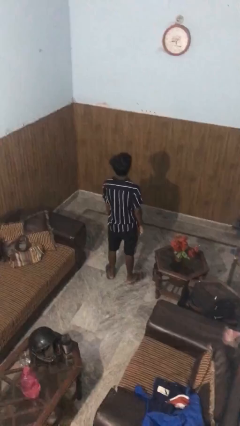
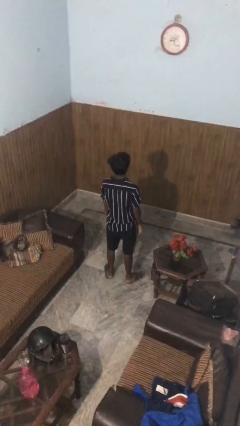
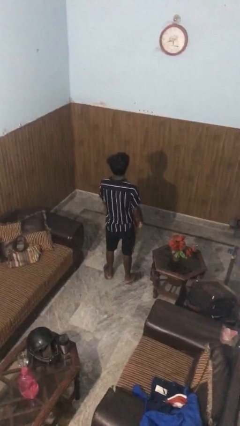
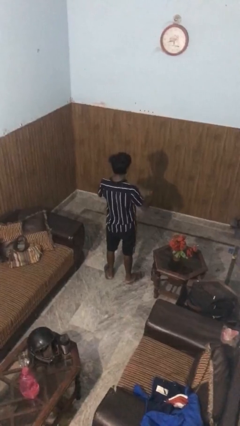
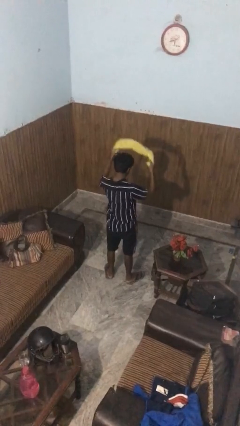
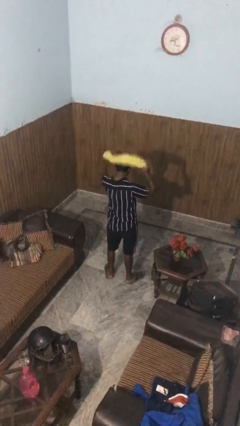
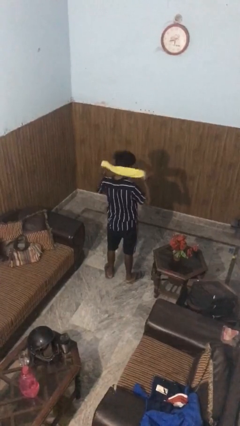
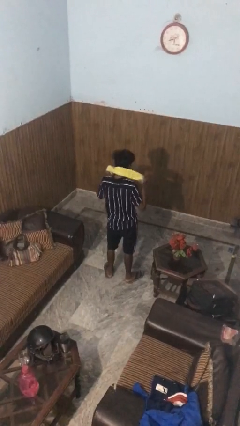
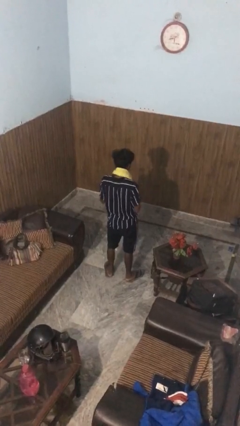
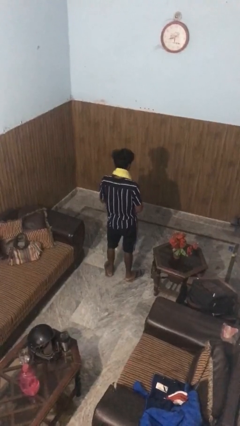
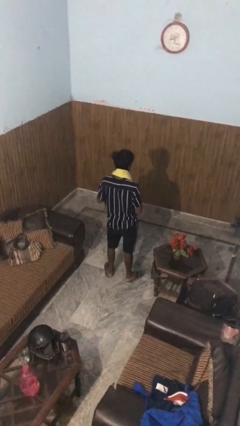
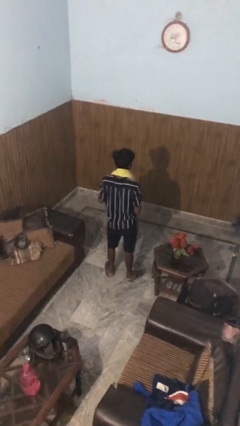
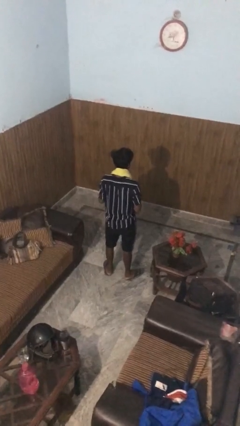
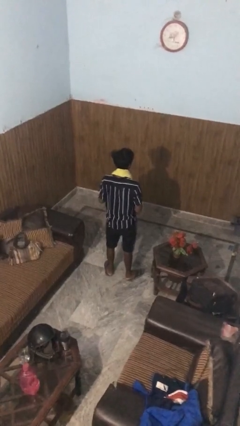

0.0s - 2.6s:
person puts on scarf

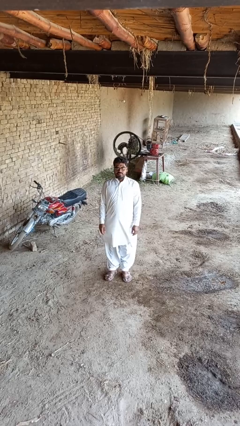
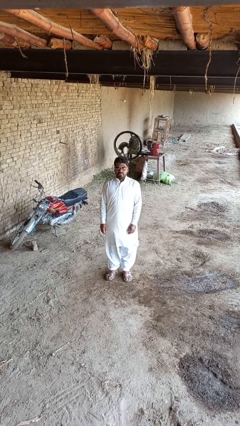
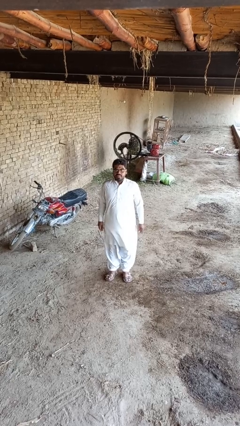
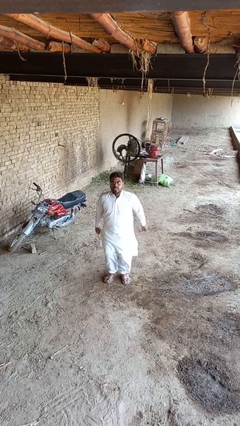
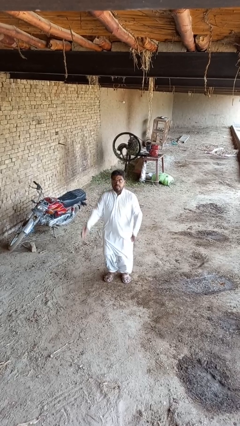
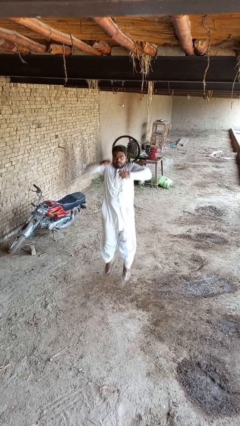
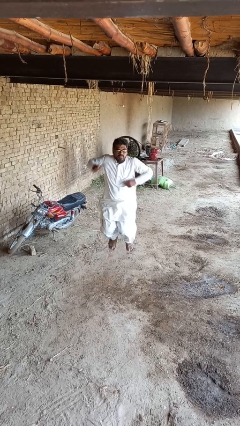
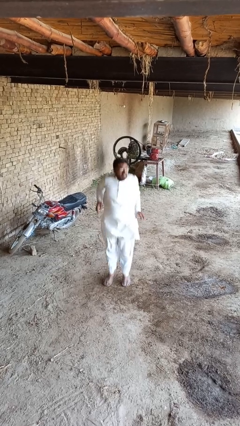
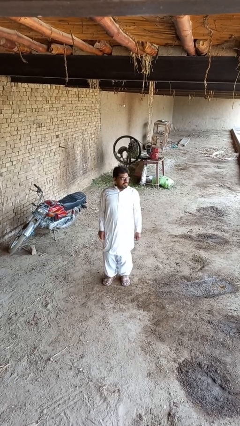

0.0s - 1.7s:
person jumps

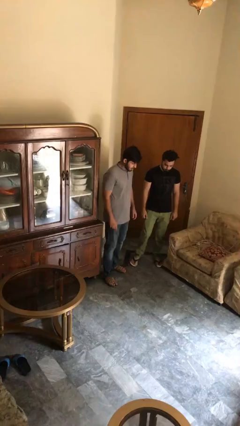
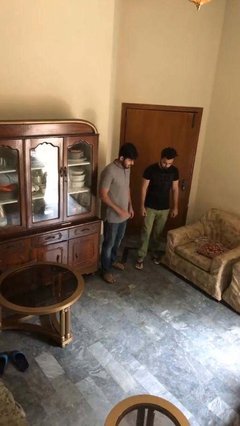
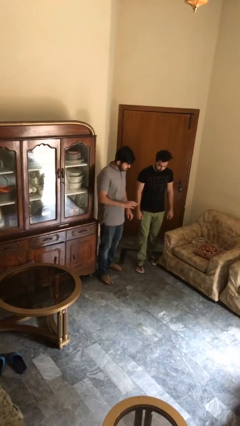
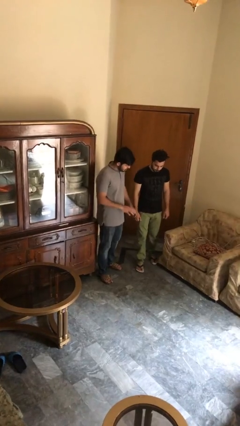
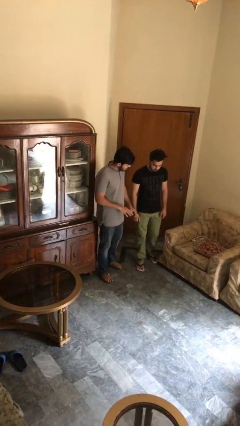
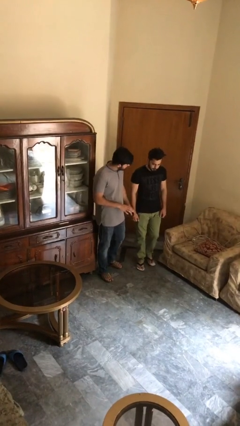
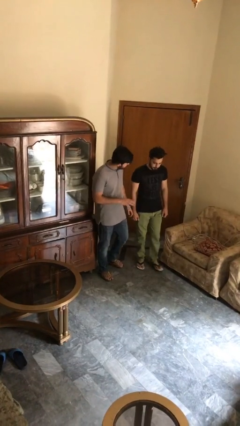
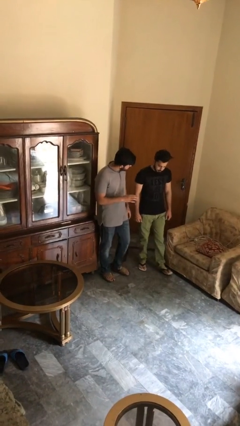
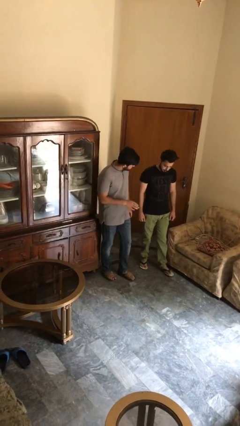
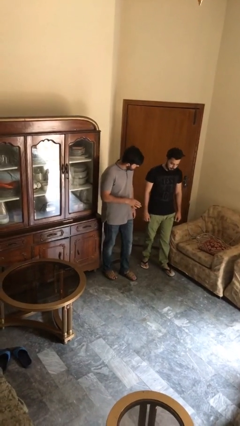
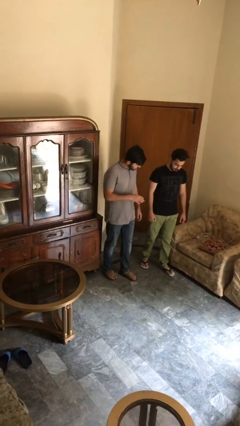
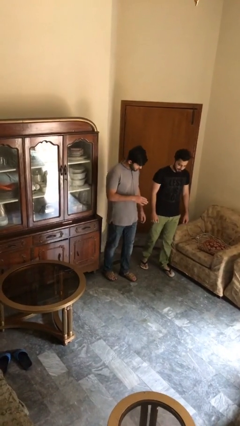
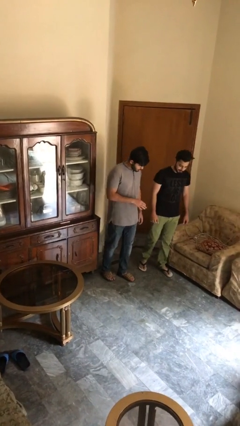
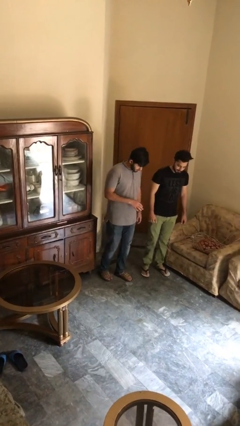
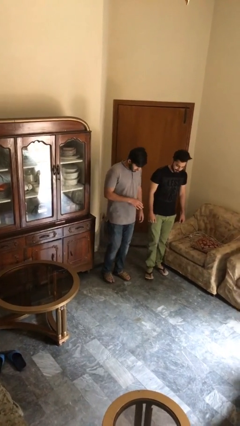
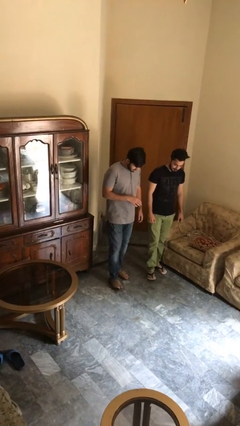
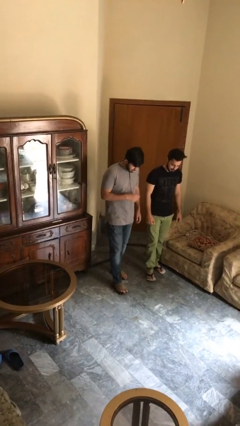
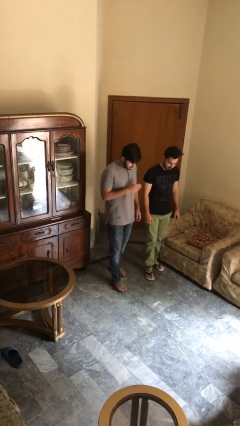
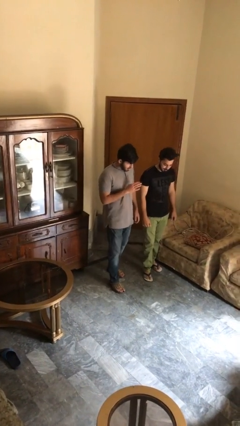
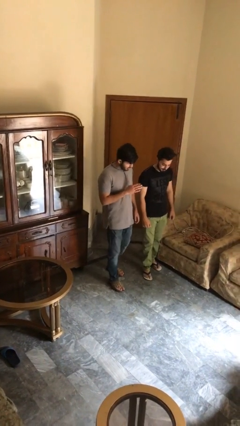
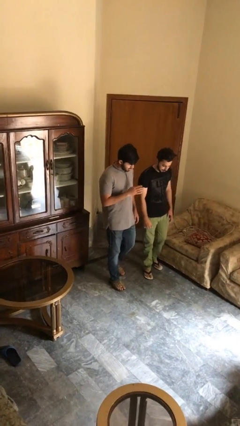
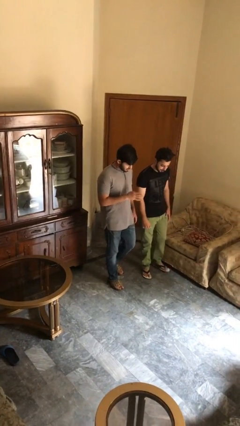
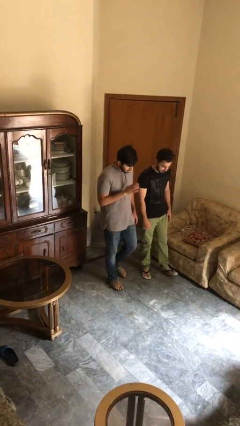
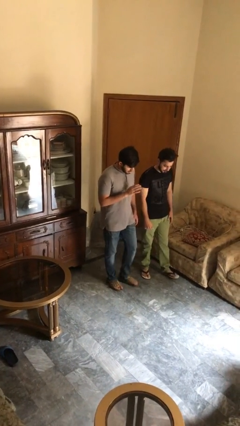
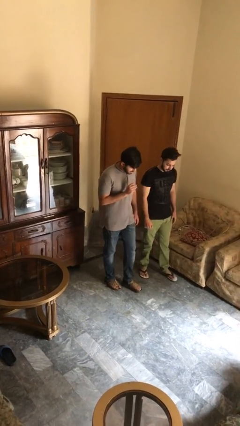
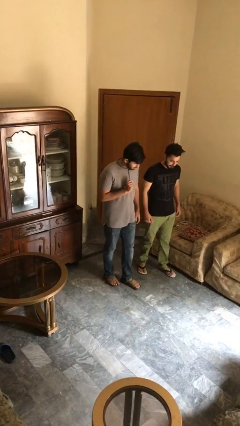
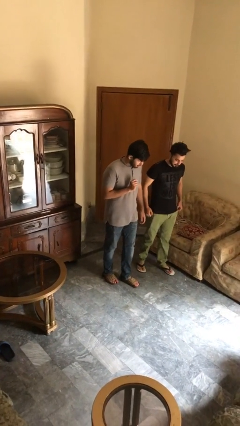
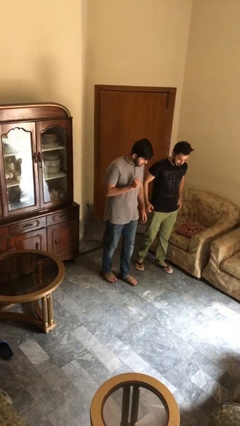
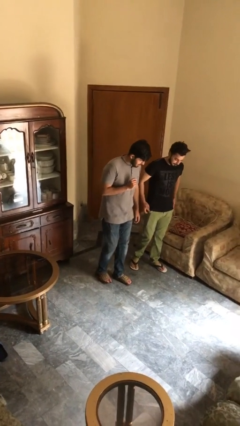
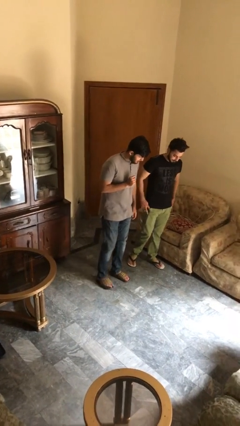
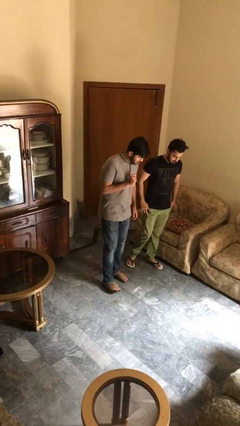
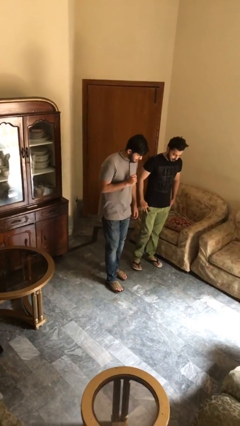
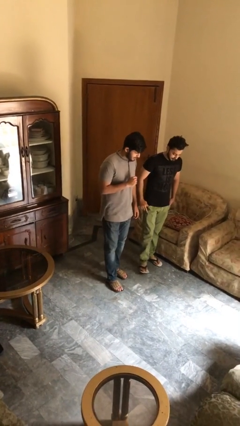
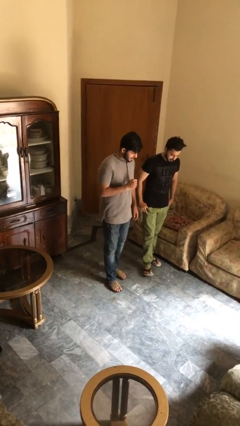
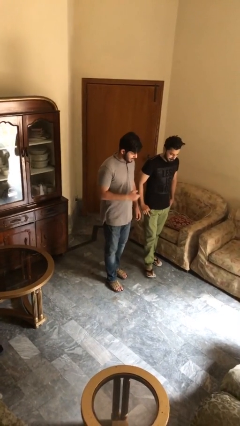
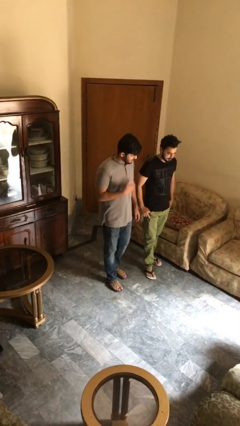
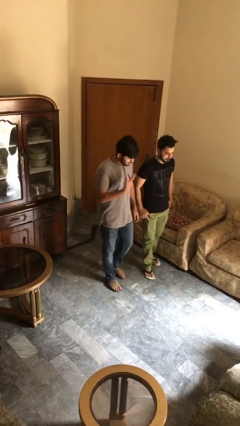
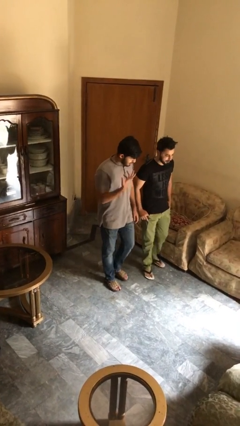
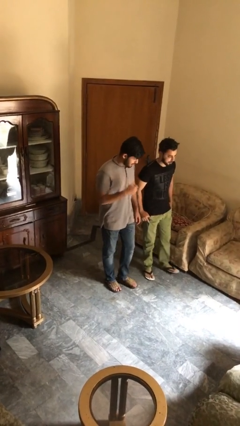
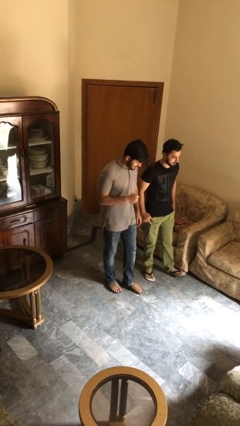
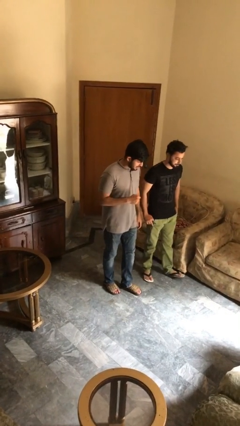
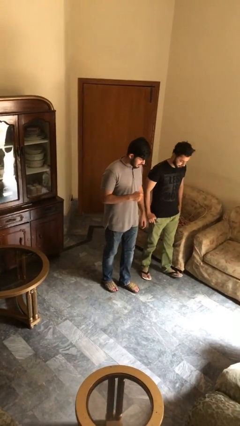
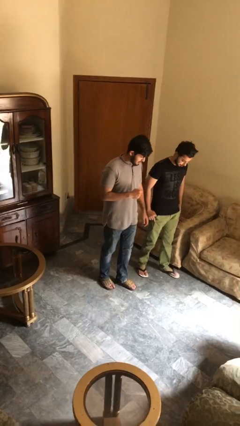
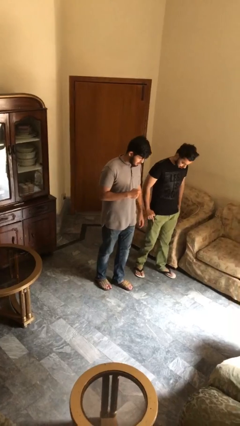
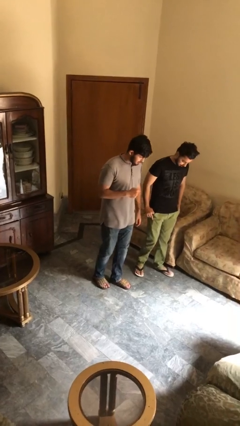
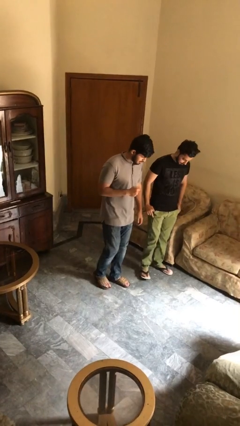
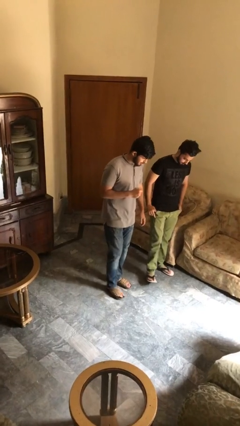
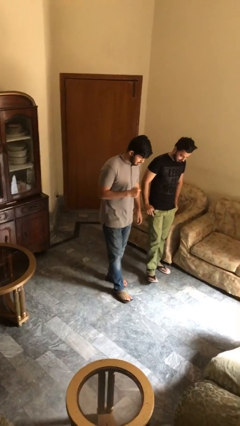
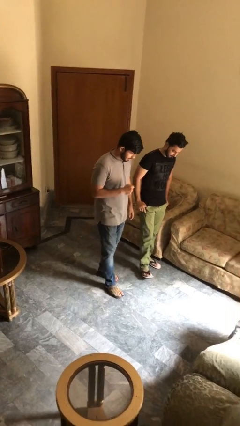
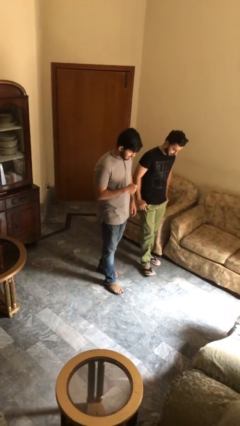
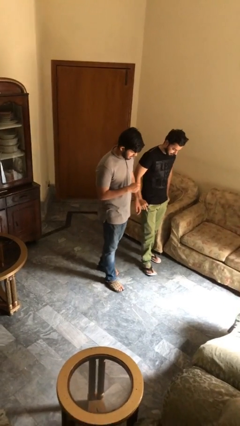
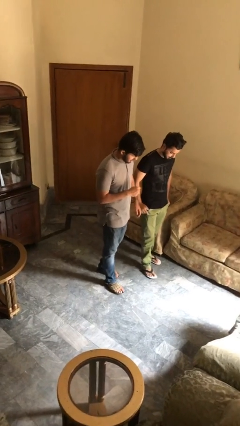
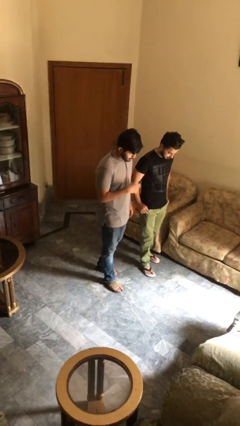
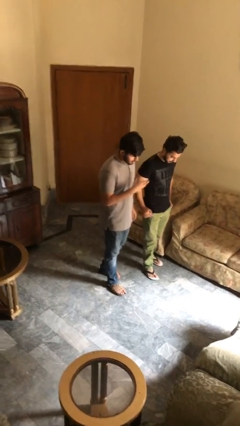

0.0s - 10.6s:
person talks to person

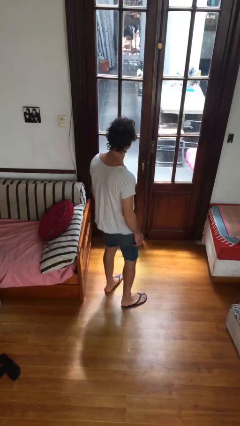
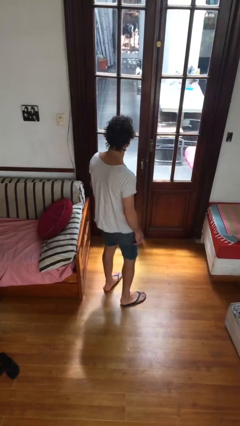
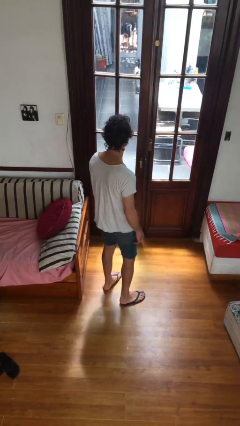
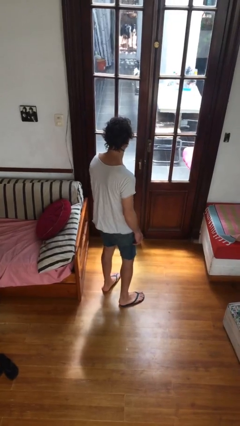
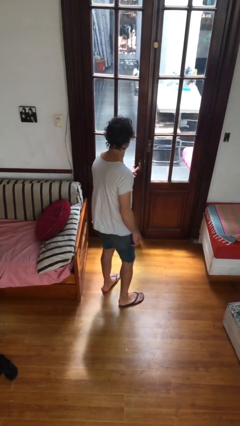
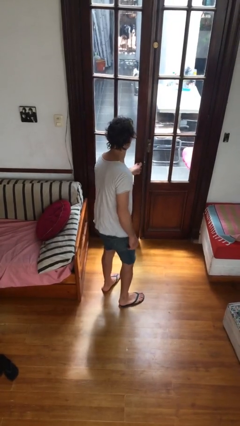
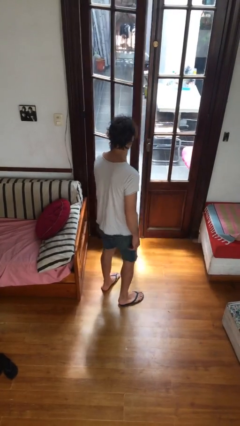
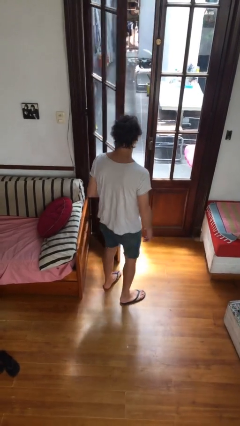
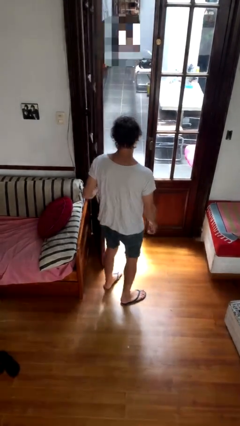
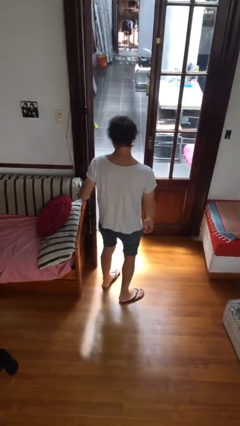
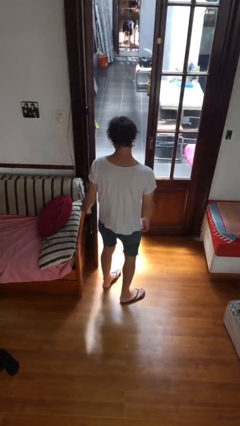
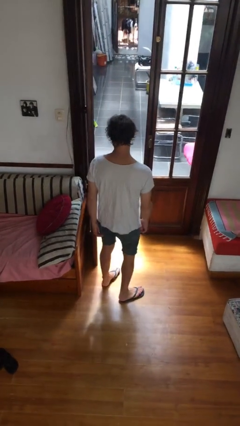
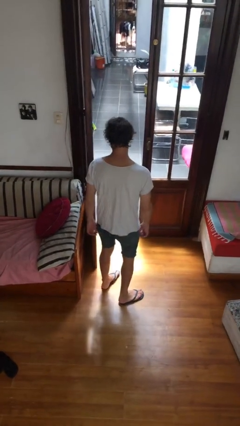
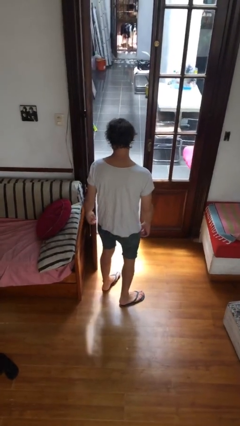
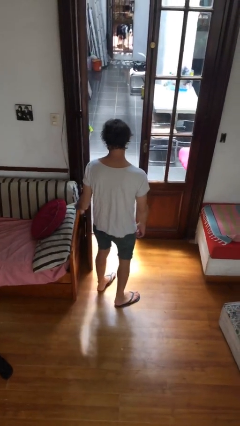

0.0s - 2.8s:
person opens facility door
